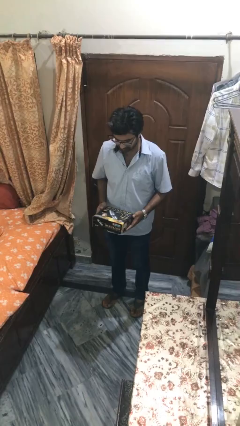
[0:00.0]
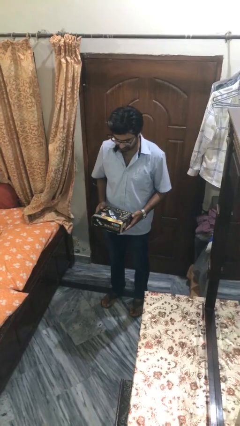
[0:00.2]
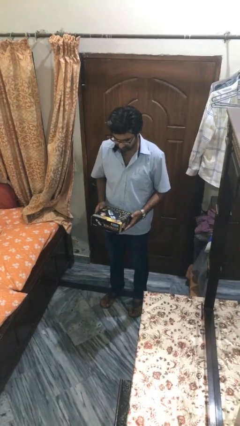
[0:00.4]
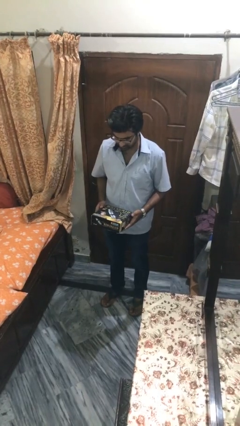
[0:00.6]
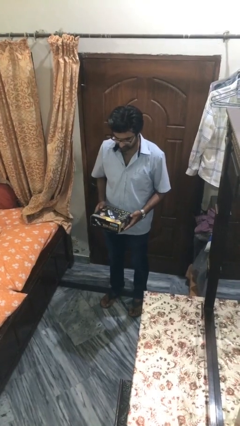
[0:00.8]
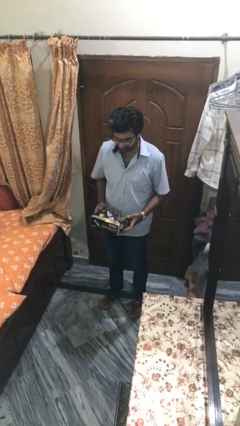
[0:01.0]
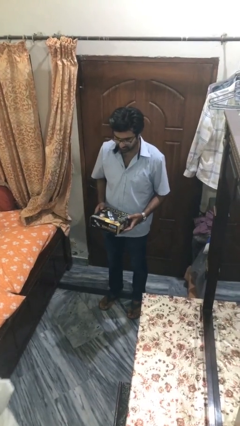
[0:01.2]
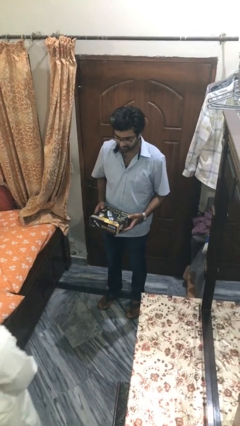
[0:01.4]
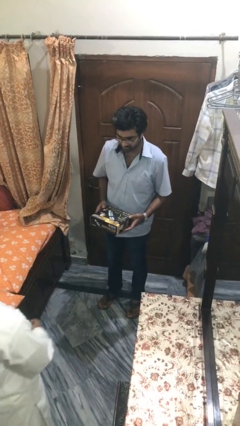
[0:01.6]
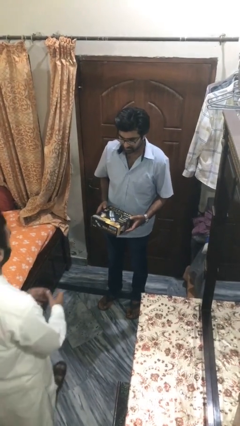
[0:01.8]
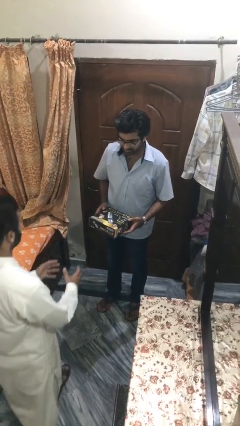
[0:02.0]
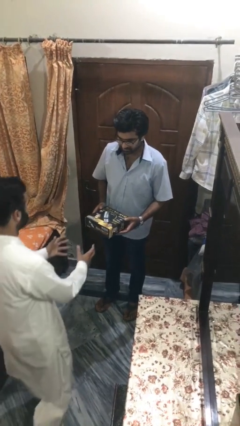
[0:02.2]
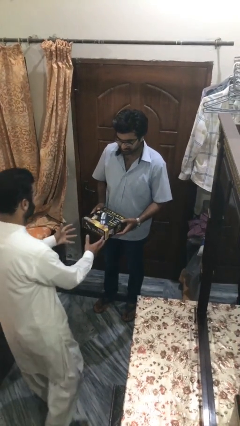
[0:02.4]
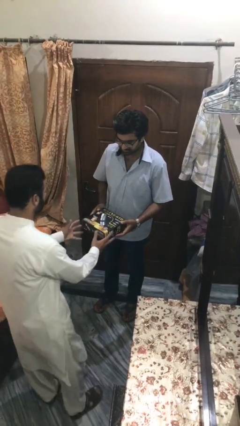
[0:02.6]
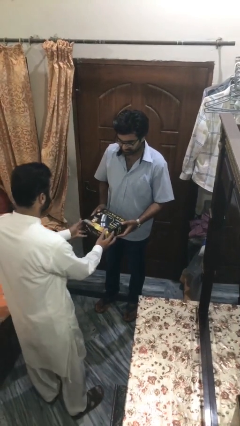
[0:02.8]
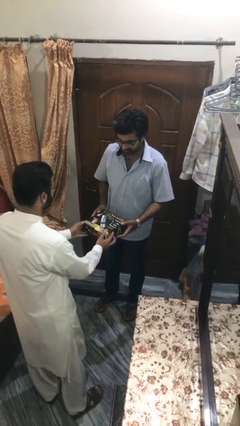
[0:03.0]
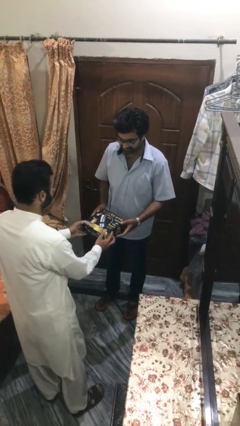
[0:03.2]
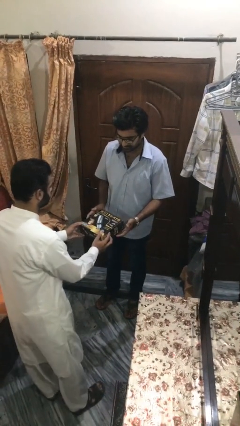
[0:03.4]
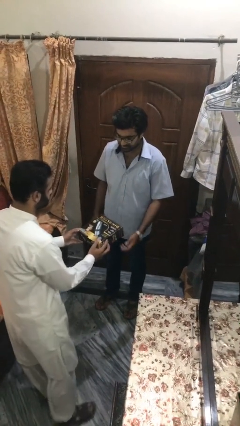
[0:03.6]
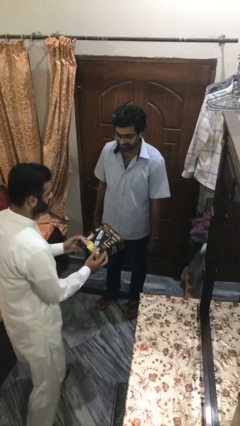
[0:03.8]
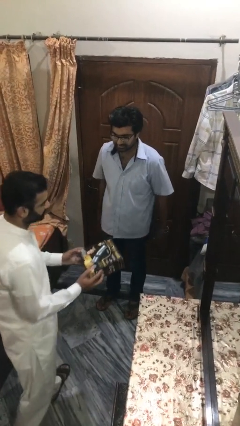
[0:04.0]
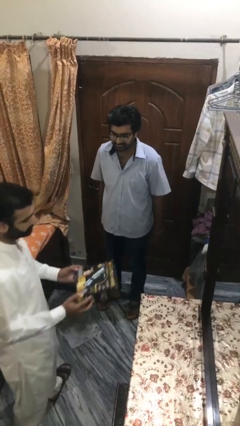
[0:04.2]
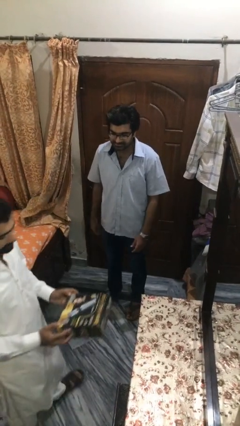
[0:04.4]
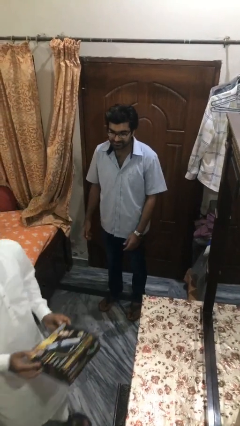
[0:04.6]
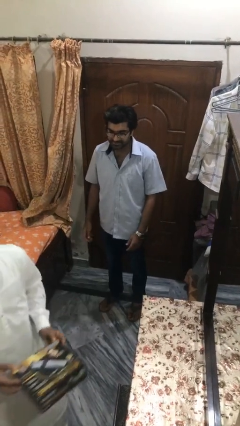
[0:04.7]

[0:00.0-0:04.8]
person transfers object to person

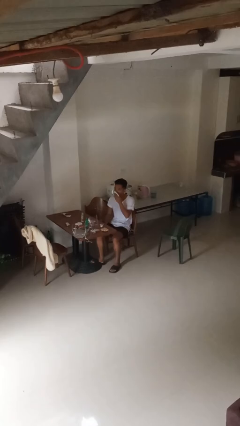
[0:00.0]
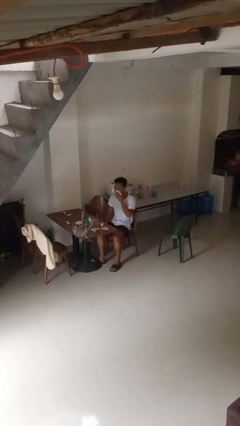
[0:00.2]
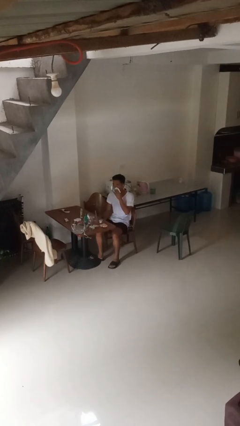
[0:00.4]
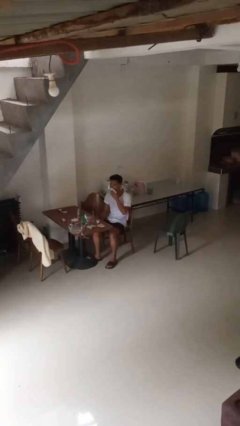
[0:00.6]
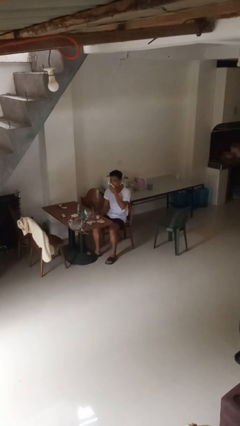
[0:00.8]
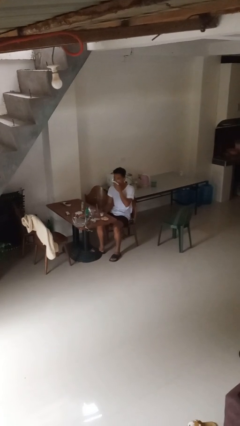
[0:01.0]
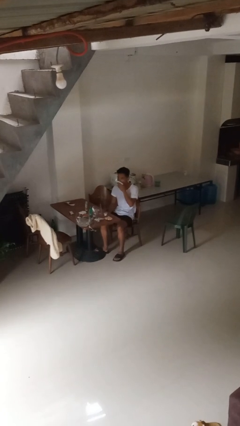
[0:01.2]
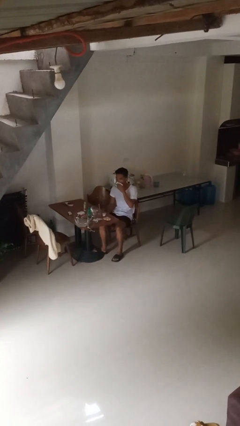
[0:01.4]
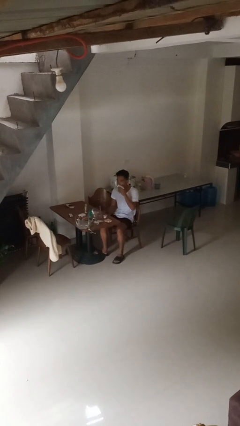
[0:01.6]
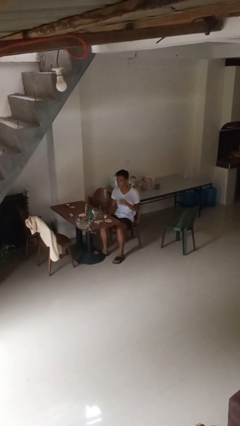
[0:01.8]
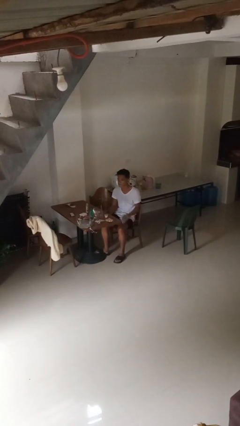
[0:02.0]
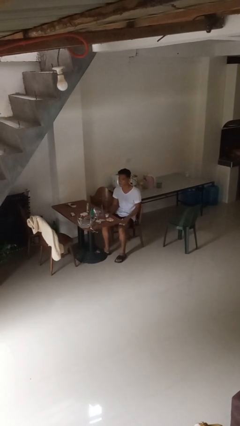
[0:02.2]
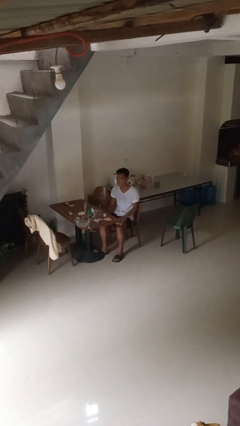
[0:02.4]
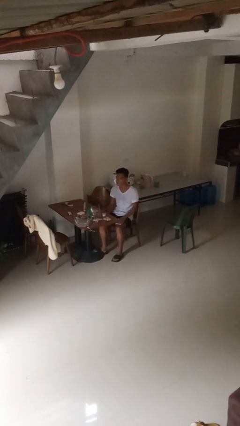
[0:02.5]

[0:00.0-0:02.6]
person wipes mouth with napkin

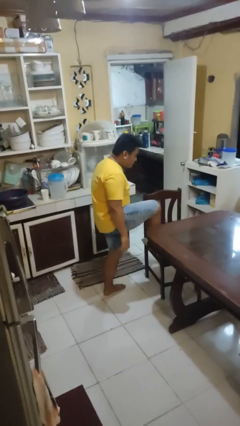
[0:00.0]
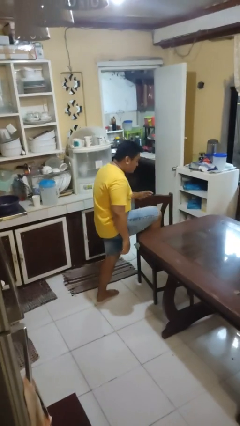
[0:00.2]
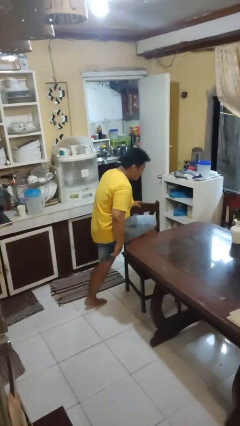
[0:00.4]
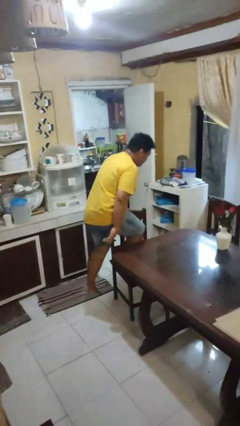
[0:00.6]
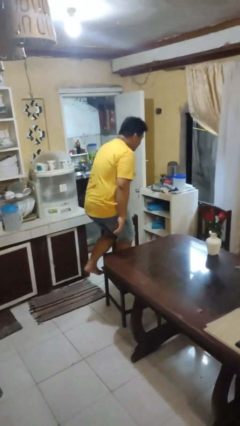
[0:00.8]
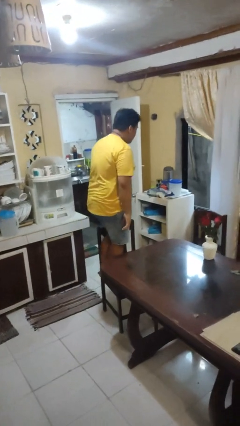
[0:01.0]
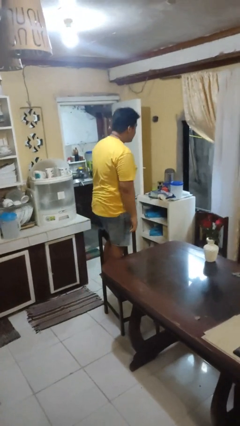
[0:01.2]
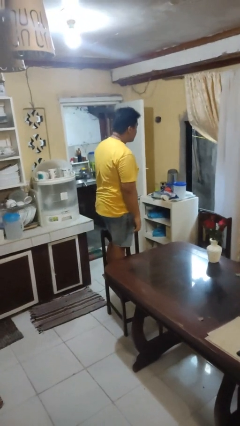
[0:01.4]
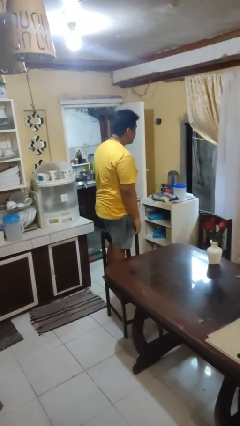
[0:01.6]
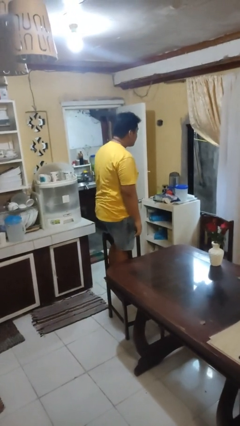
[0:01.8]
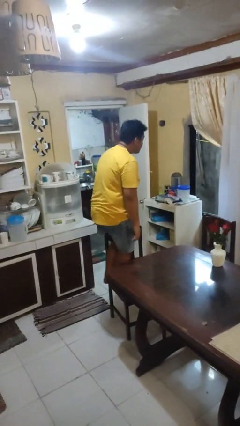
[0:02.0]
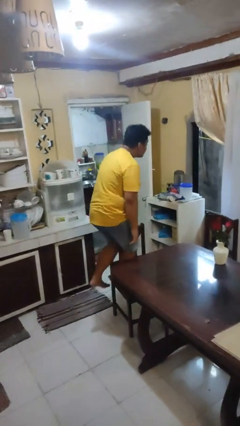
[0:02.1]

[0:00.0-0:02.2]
person climbs on chair

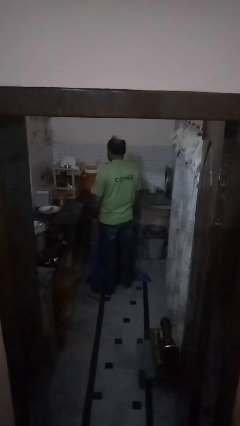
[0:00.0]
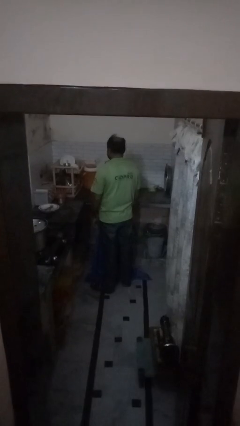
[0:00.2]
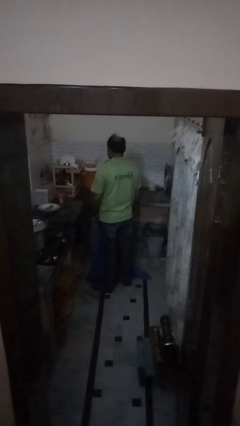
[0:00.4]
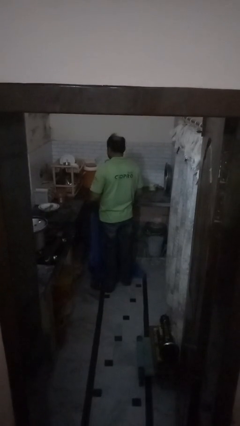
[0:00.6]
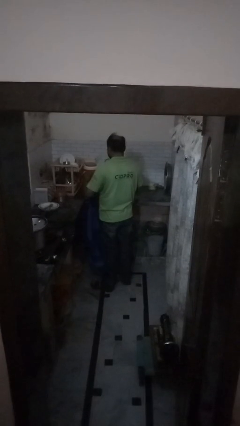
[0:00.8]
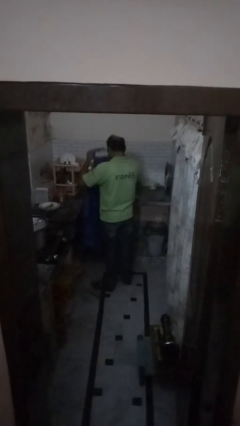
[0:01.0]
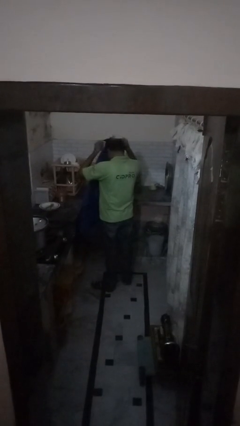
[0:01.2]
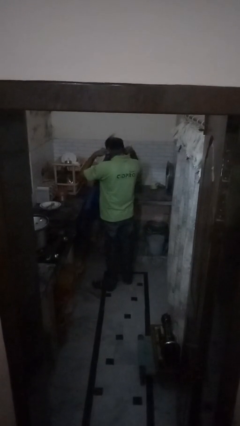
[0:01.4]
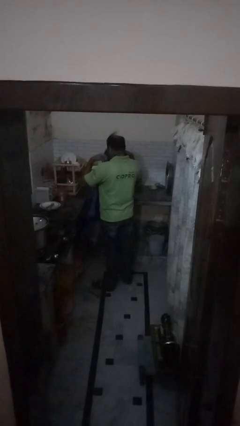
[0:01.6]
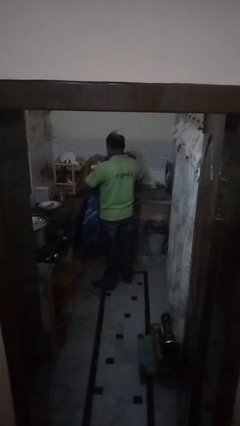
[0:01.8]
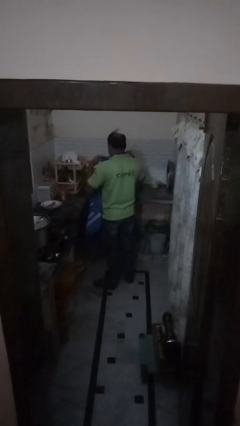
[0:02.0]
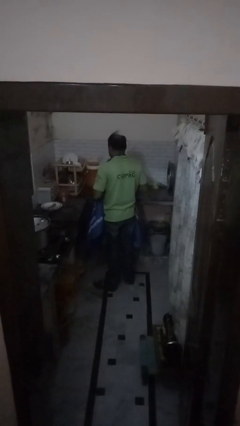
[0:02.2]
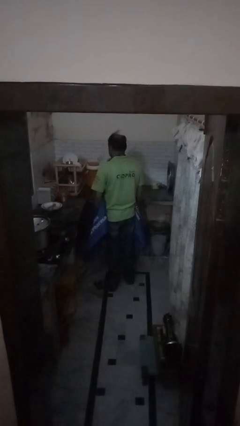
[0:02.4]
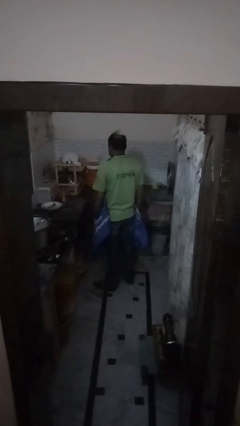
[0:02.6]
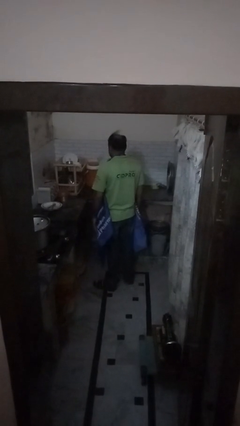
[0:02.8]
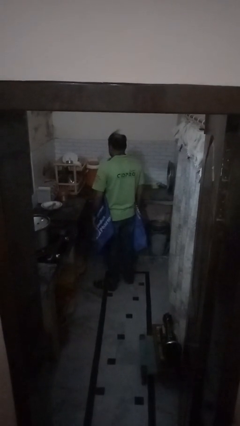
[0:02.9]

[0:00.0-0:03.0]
person puts on apron

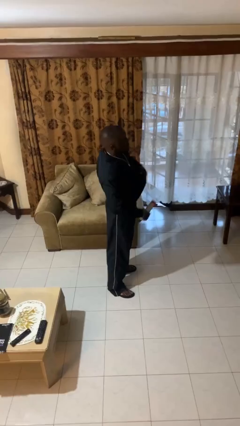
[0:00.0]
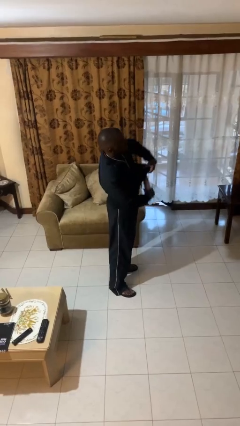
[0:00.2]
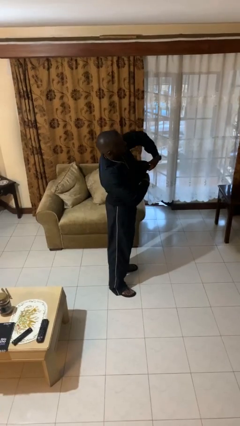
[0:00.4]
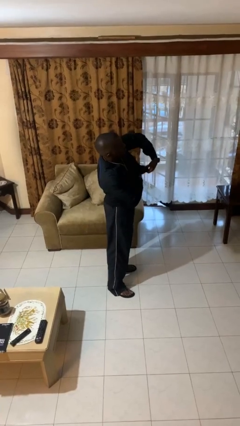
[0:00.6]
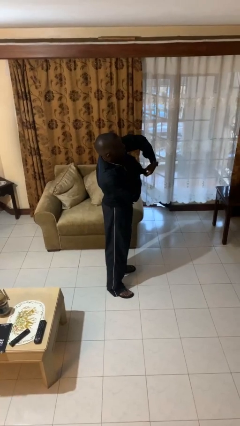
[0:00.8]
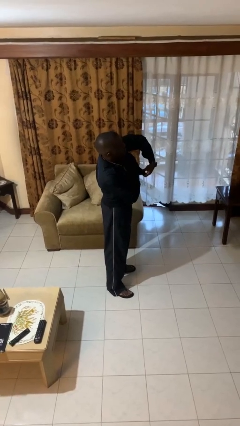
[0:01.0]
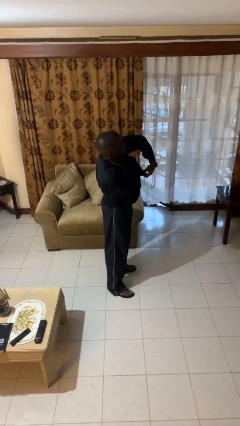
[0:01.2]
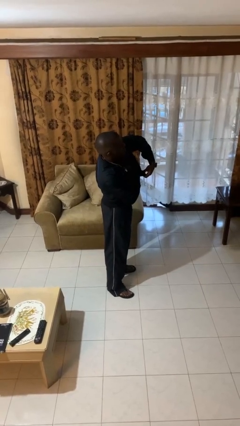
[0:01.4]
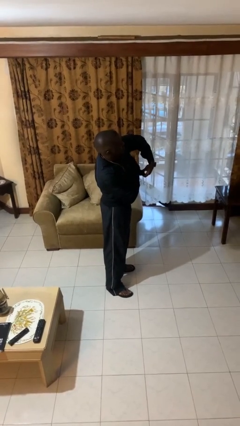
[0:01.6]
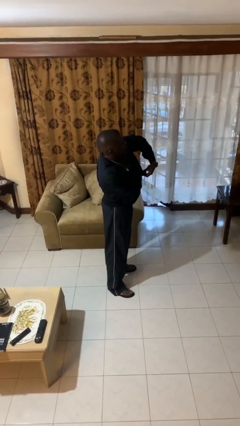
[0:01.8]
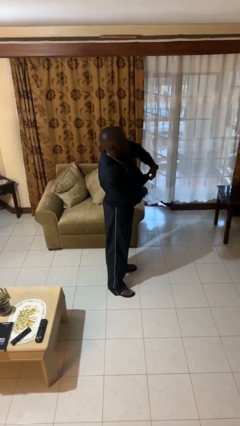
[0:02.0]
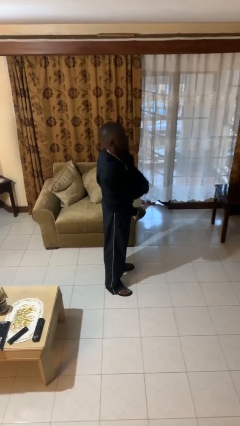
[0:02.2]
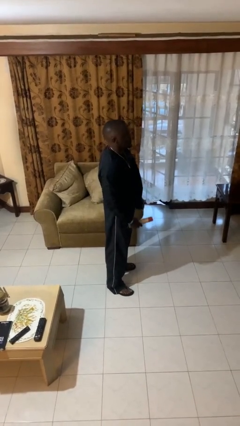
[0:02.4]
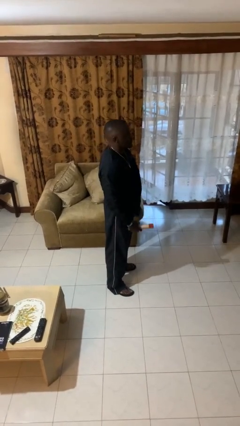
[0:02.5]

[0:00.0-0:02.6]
person applies deodorant

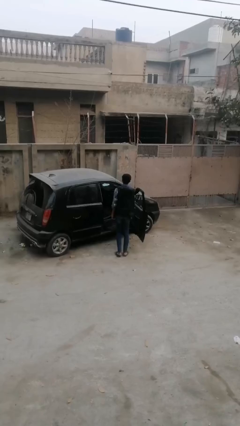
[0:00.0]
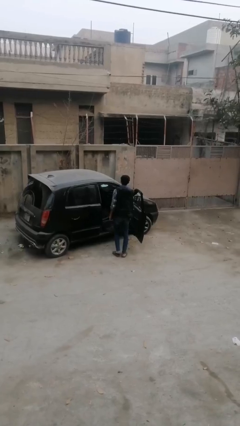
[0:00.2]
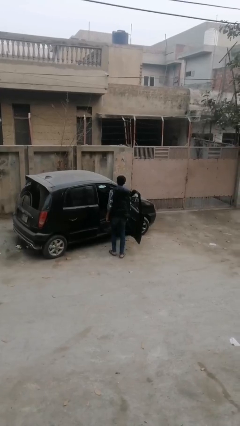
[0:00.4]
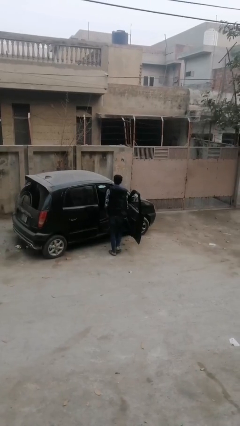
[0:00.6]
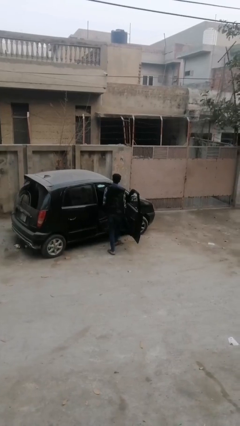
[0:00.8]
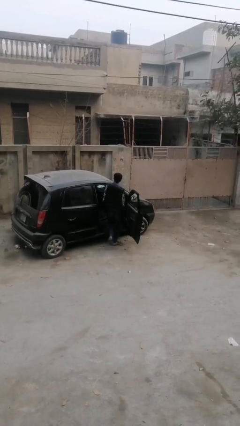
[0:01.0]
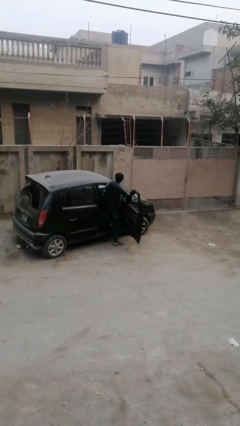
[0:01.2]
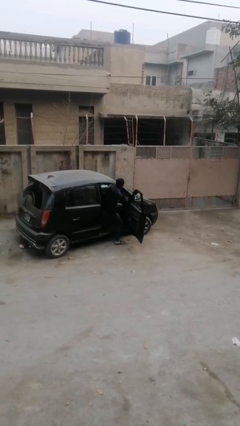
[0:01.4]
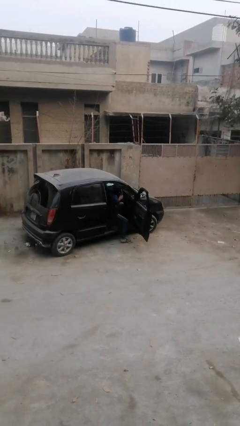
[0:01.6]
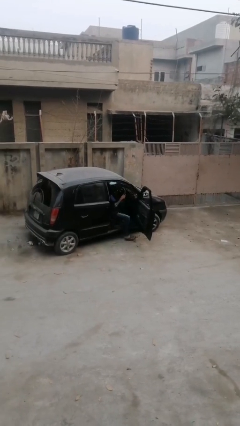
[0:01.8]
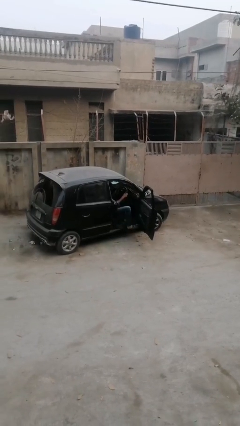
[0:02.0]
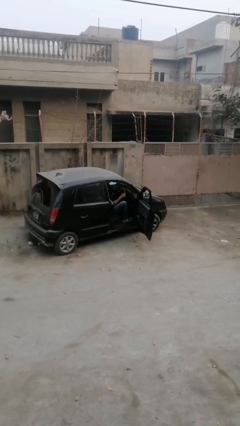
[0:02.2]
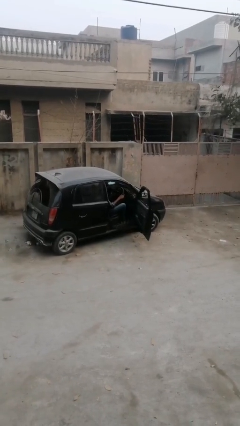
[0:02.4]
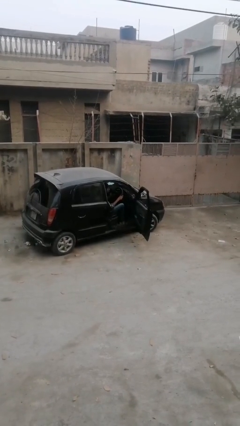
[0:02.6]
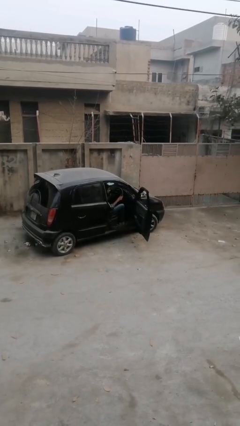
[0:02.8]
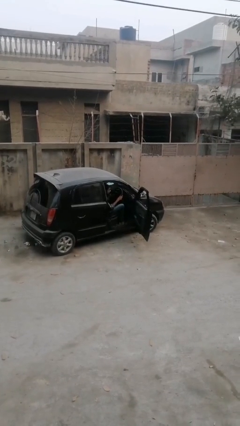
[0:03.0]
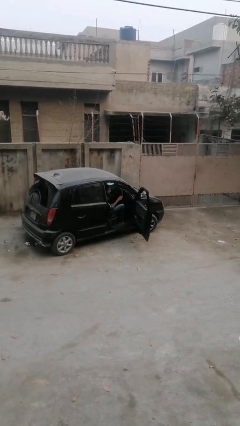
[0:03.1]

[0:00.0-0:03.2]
person enters car
